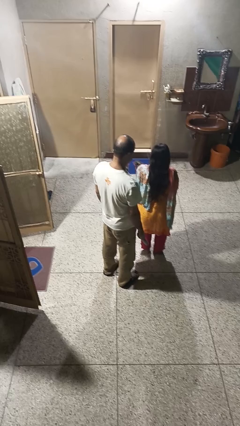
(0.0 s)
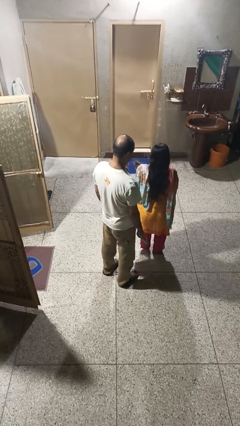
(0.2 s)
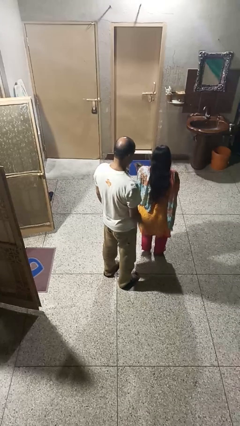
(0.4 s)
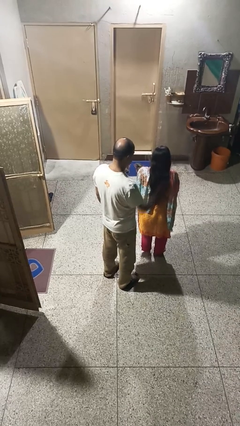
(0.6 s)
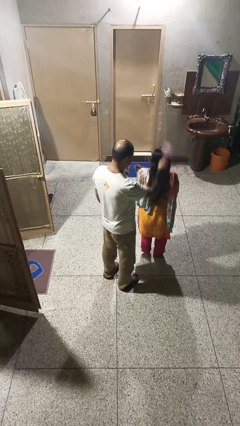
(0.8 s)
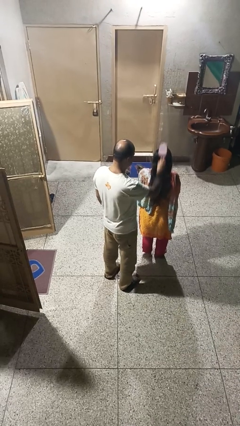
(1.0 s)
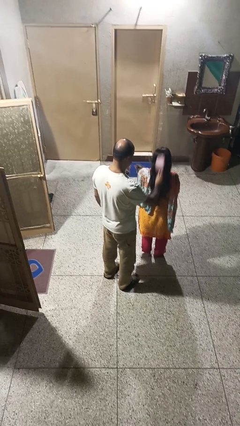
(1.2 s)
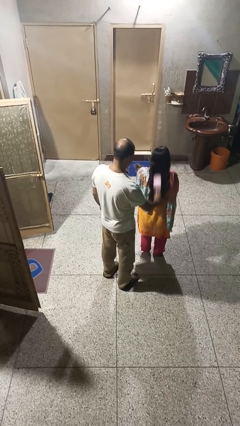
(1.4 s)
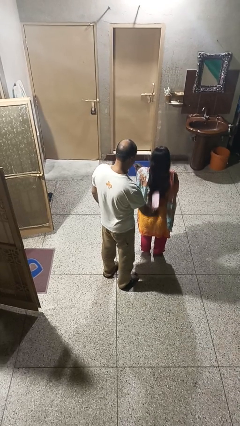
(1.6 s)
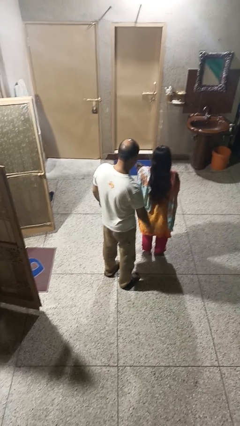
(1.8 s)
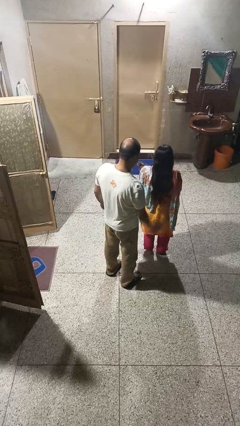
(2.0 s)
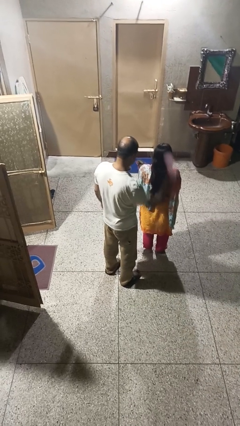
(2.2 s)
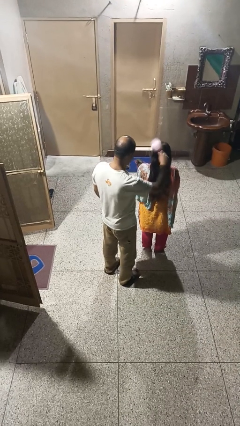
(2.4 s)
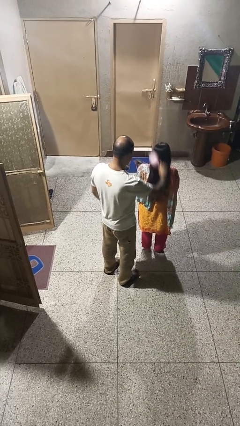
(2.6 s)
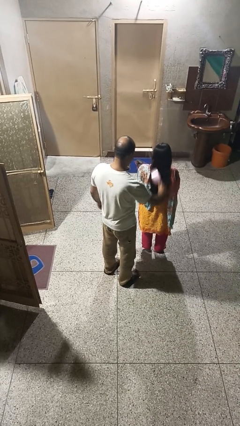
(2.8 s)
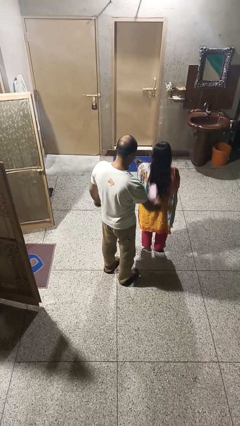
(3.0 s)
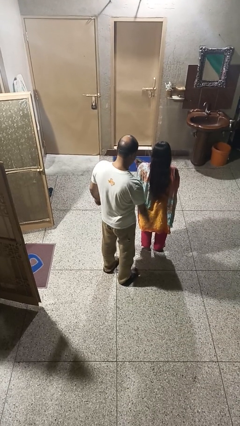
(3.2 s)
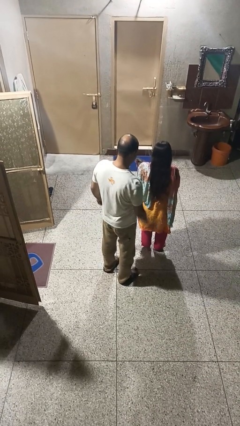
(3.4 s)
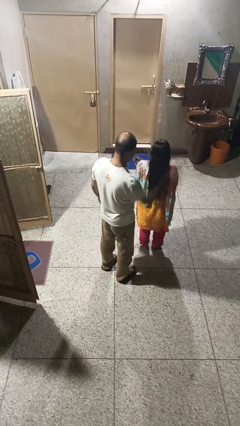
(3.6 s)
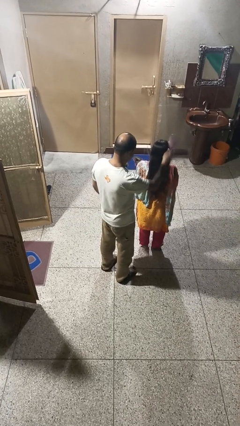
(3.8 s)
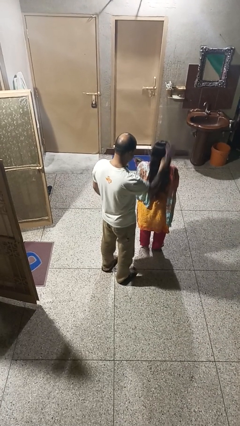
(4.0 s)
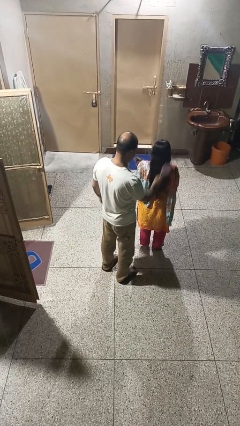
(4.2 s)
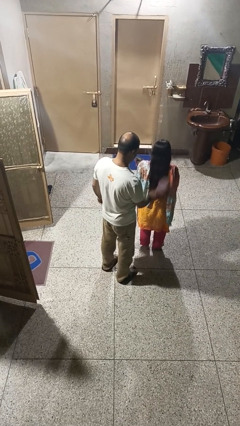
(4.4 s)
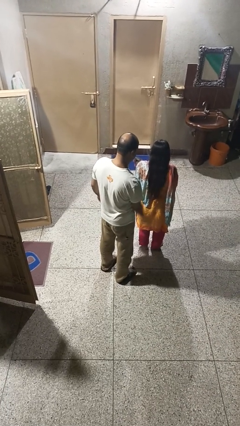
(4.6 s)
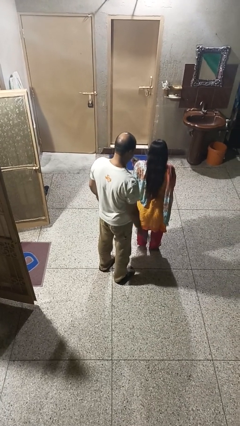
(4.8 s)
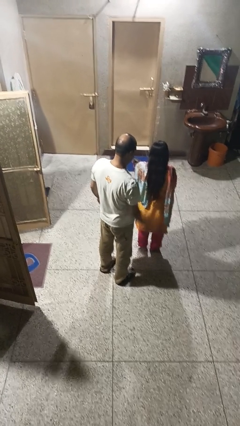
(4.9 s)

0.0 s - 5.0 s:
person brushes hair of person

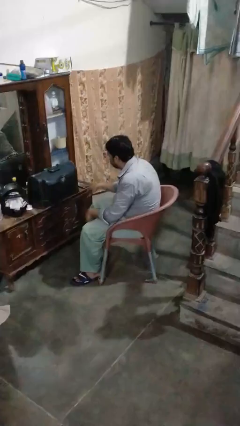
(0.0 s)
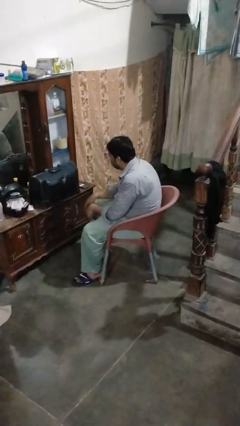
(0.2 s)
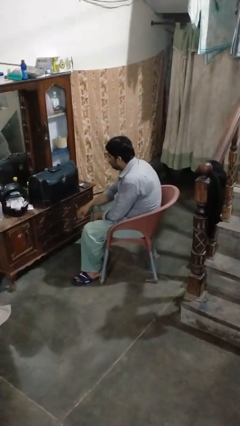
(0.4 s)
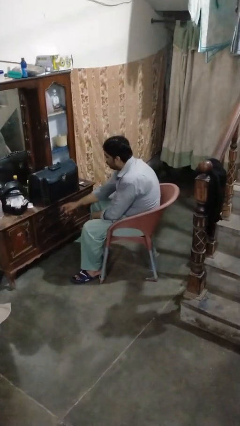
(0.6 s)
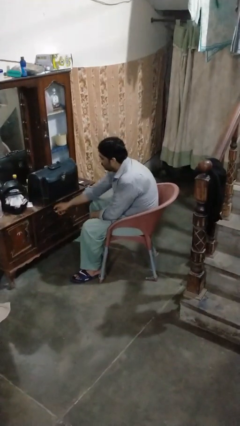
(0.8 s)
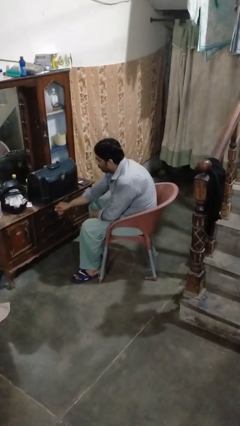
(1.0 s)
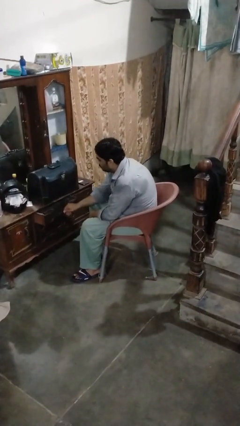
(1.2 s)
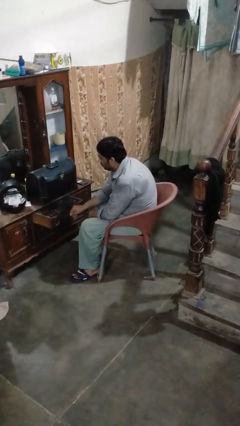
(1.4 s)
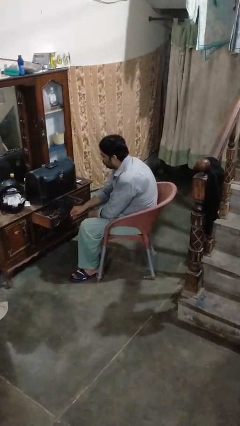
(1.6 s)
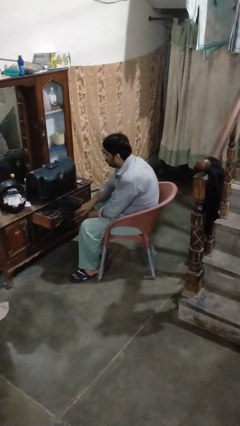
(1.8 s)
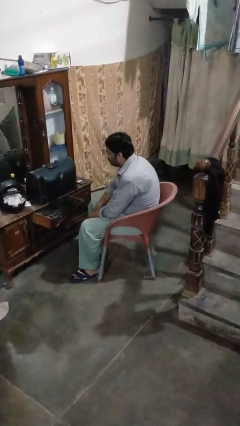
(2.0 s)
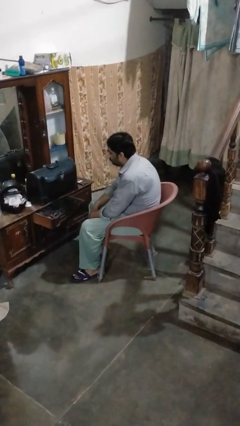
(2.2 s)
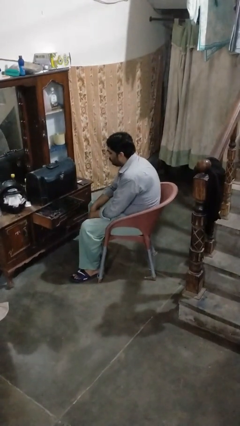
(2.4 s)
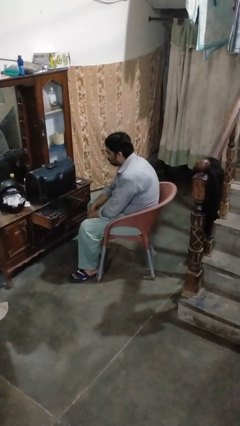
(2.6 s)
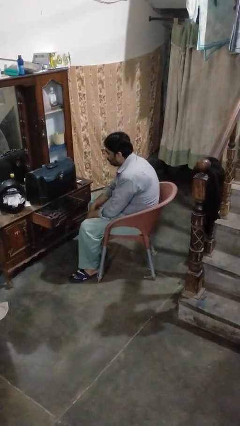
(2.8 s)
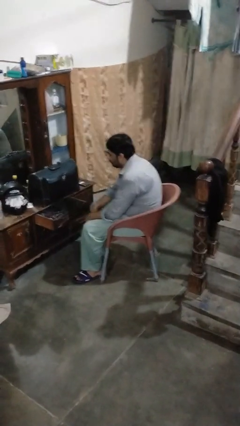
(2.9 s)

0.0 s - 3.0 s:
person opens dresser drawer

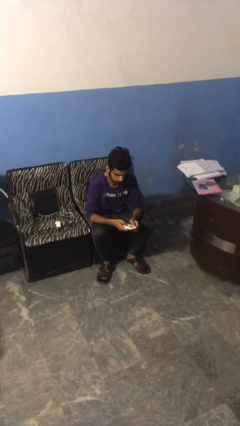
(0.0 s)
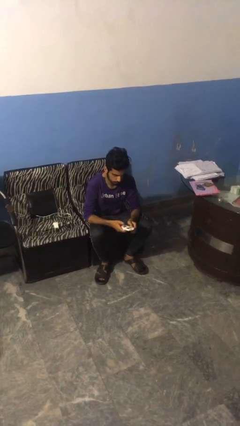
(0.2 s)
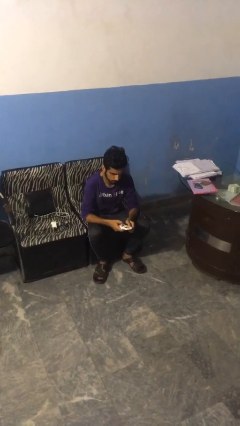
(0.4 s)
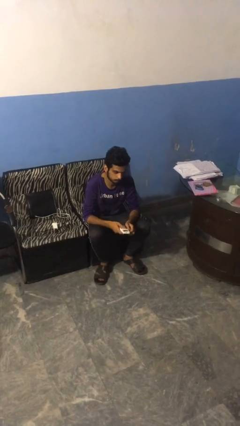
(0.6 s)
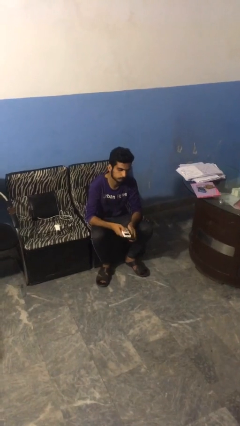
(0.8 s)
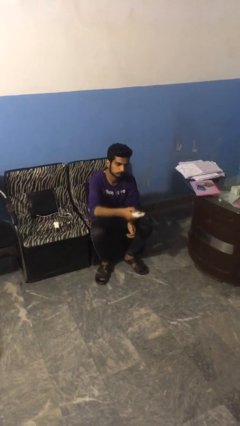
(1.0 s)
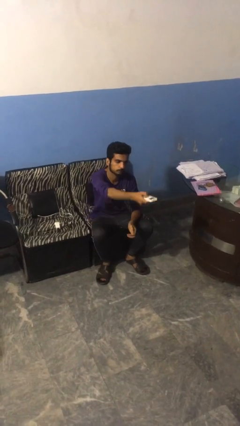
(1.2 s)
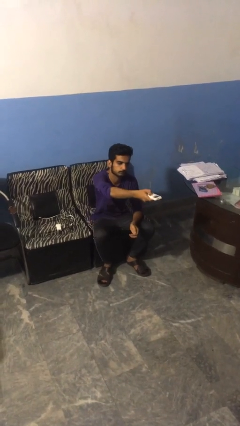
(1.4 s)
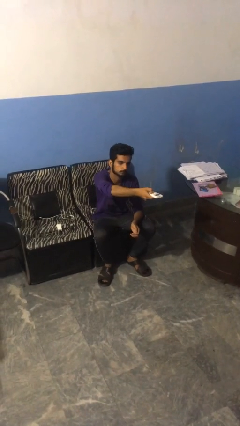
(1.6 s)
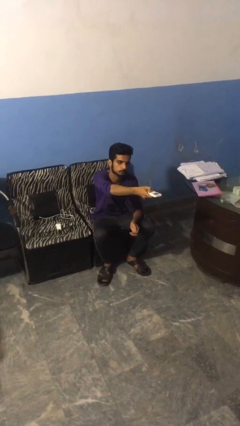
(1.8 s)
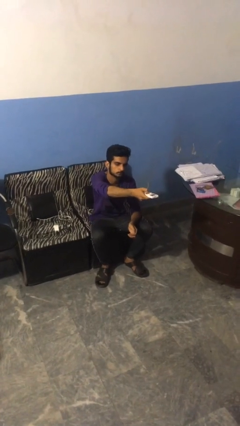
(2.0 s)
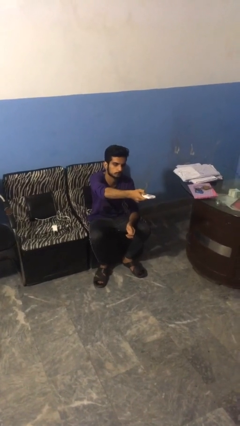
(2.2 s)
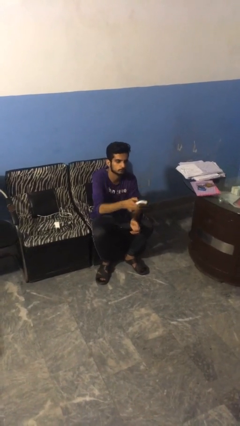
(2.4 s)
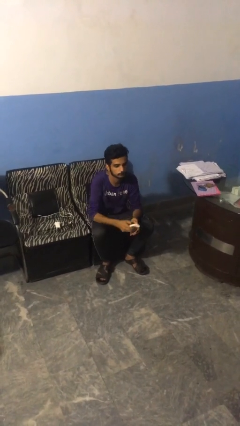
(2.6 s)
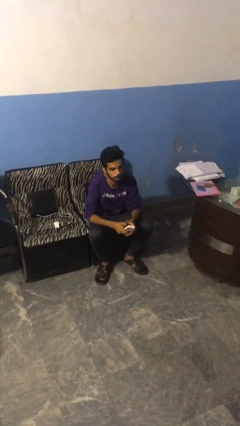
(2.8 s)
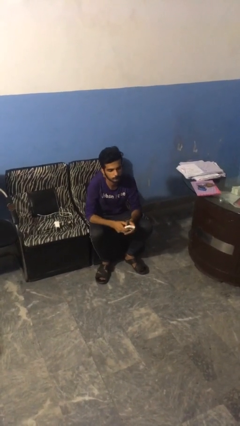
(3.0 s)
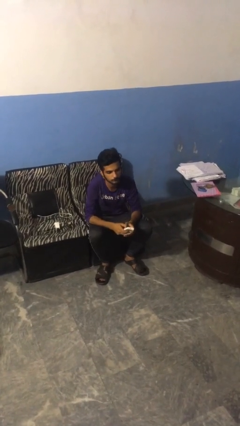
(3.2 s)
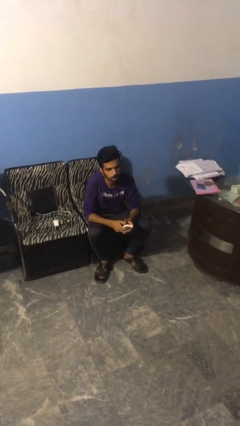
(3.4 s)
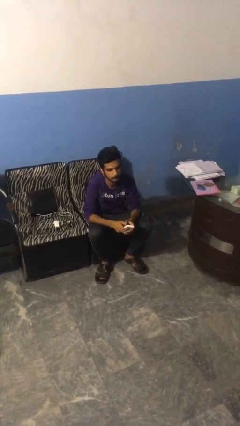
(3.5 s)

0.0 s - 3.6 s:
person uses television remote

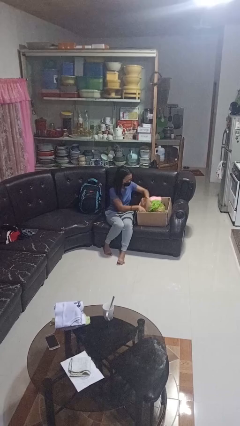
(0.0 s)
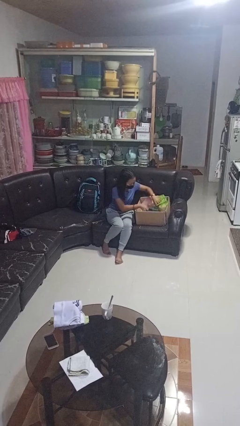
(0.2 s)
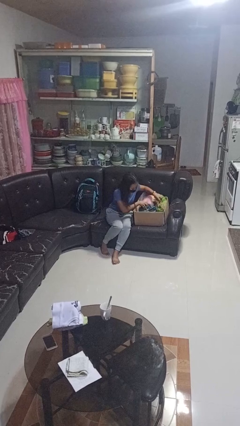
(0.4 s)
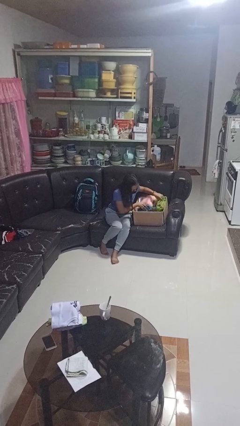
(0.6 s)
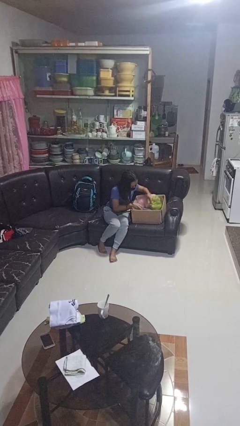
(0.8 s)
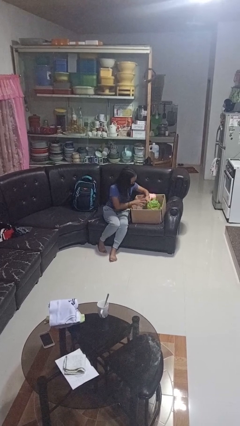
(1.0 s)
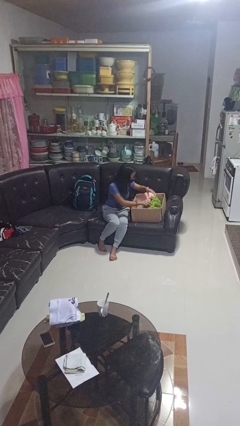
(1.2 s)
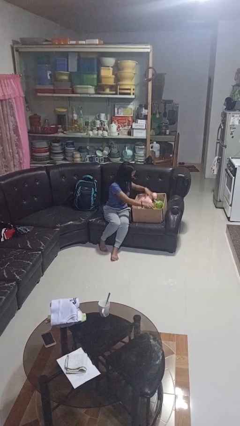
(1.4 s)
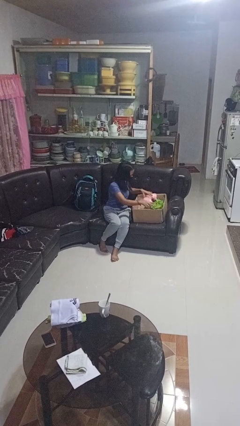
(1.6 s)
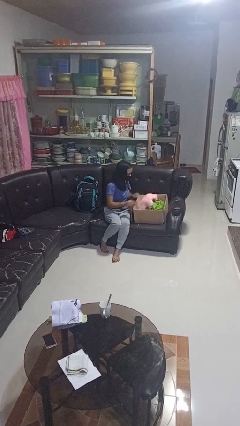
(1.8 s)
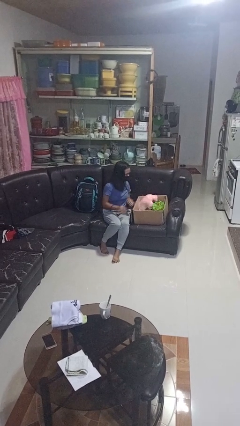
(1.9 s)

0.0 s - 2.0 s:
person searches in box

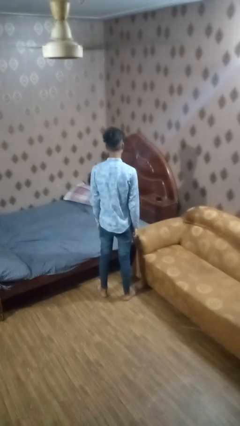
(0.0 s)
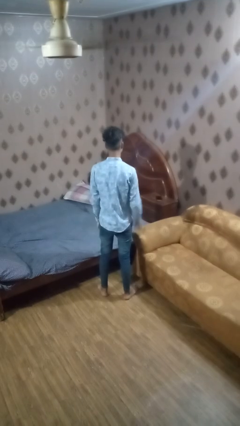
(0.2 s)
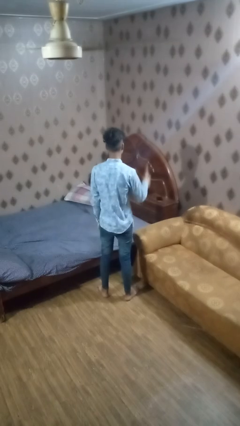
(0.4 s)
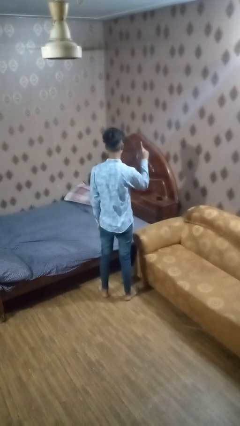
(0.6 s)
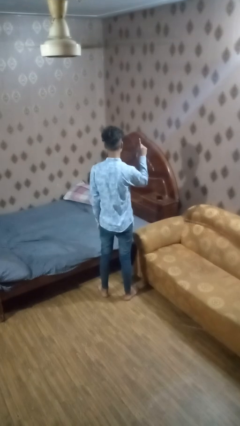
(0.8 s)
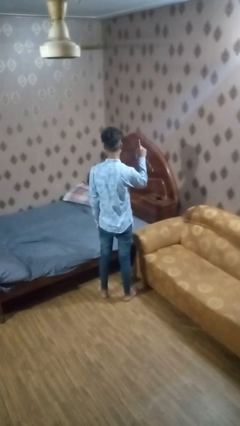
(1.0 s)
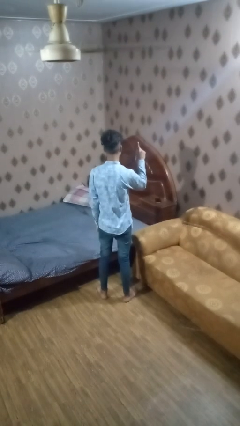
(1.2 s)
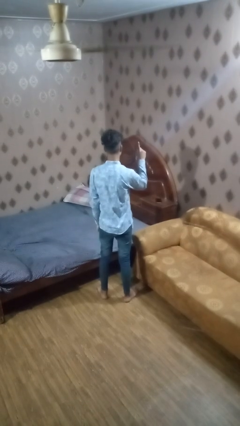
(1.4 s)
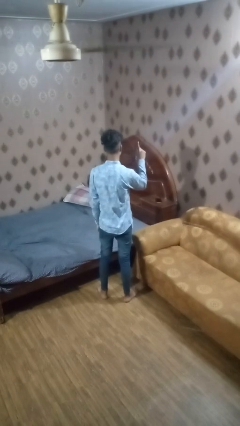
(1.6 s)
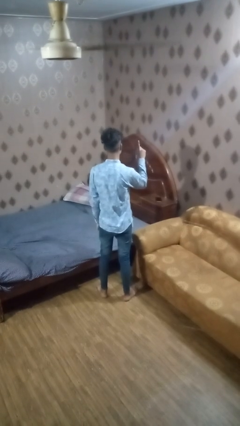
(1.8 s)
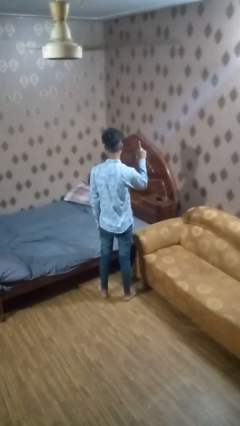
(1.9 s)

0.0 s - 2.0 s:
person gestures number one

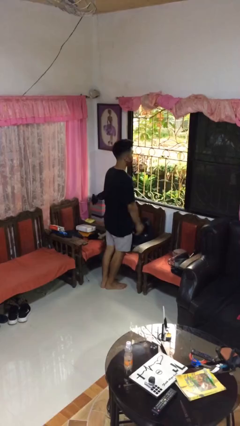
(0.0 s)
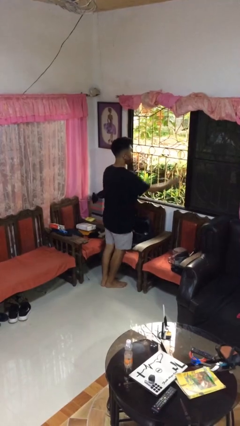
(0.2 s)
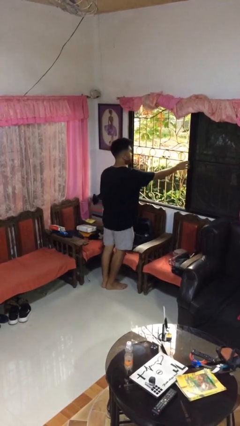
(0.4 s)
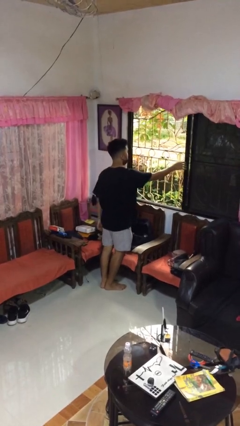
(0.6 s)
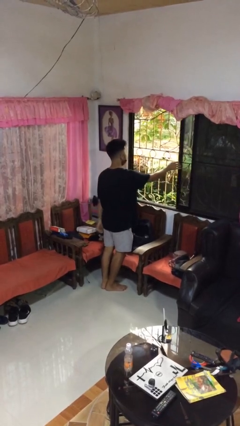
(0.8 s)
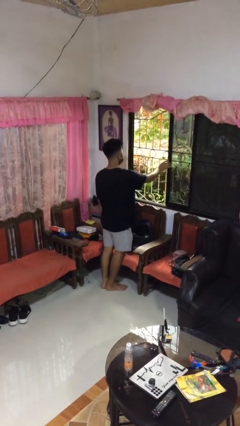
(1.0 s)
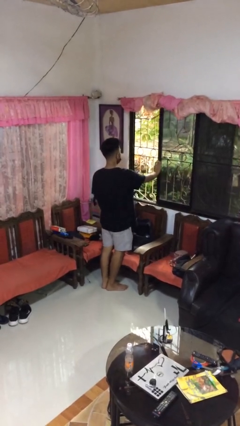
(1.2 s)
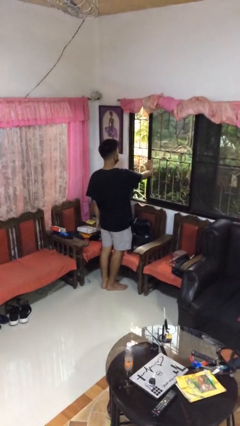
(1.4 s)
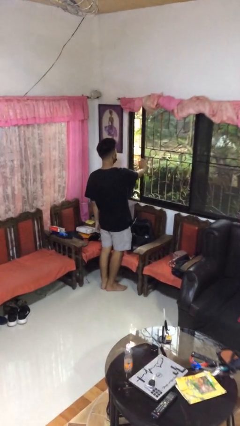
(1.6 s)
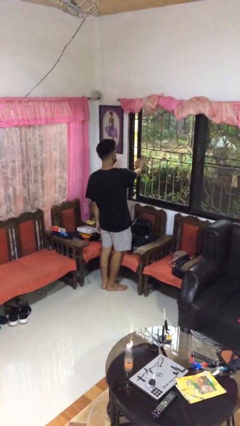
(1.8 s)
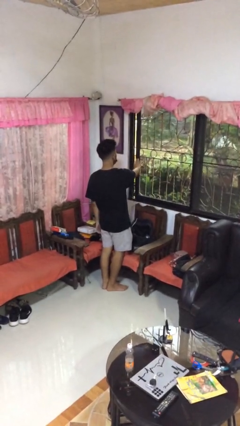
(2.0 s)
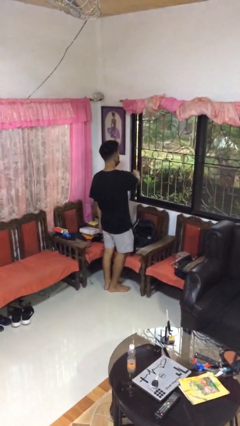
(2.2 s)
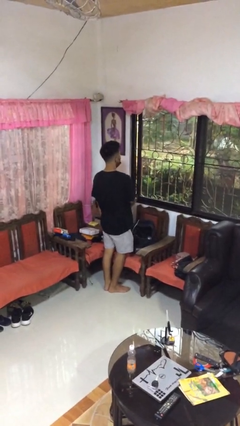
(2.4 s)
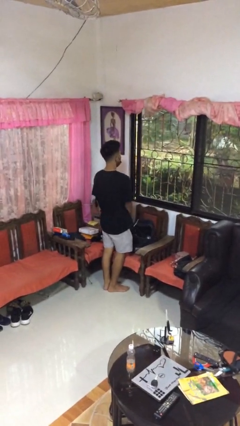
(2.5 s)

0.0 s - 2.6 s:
person closes home window
